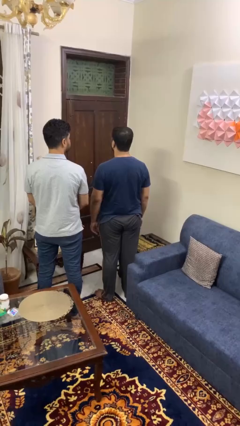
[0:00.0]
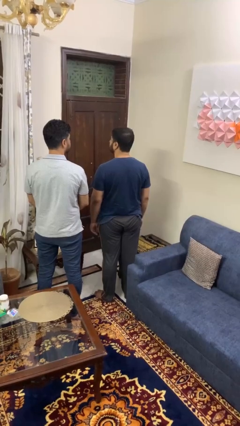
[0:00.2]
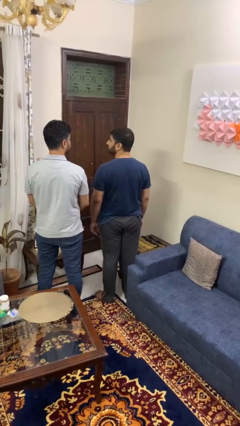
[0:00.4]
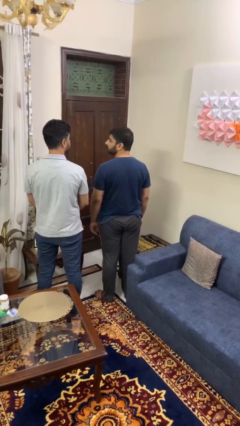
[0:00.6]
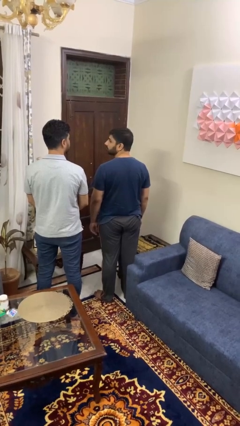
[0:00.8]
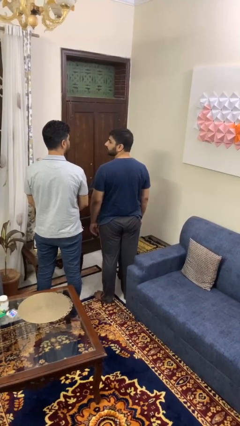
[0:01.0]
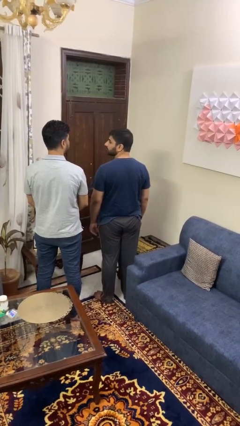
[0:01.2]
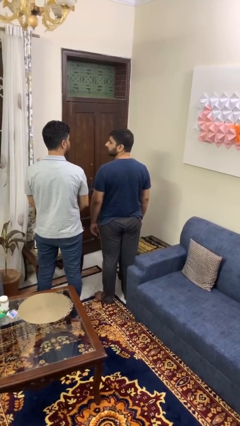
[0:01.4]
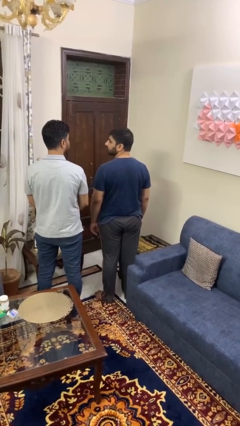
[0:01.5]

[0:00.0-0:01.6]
person looks over shoulder

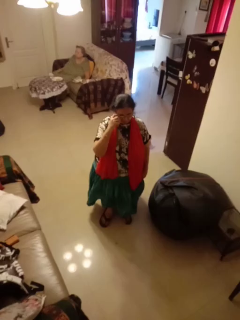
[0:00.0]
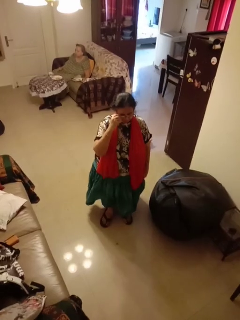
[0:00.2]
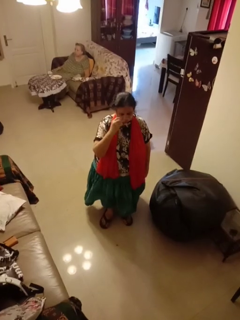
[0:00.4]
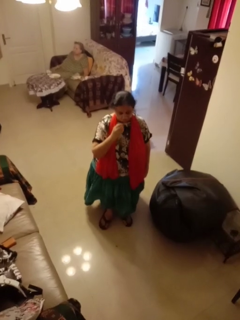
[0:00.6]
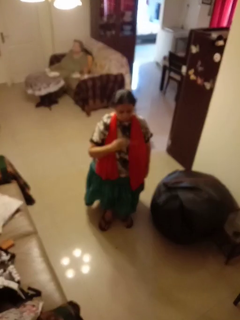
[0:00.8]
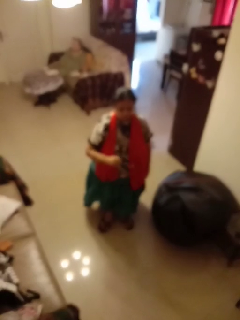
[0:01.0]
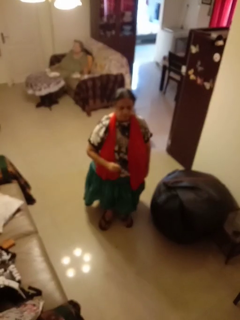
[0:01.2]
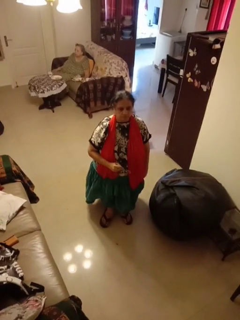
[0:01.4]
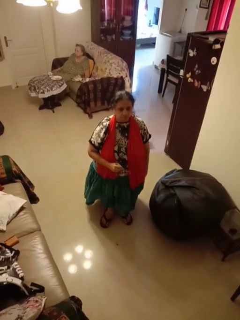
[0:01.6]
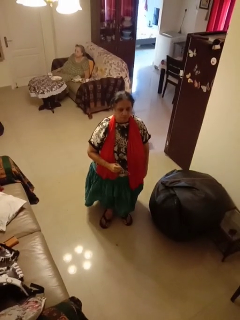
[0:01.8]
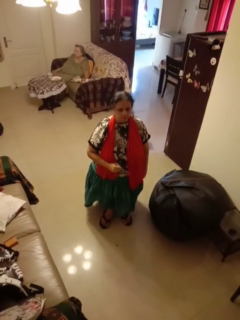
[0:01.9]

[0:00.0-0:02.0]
person takes off glasses

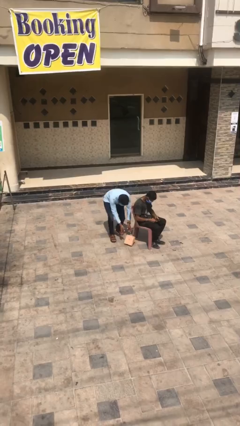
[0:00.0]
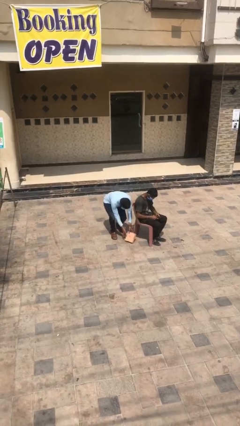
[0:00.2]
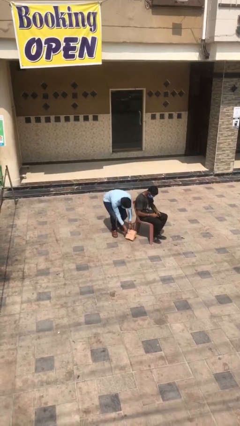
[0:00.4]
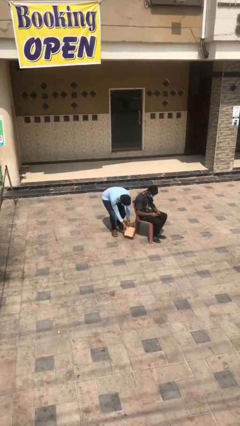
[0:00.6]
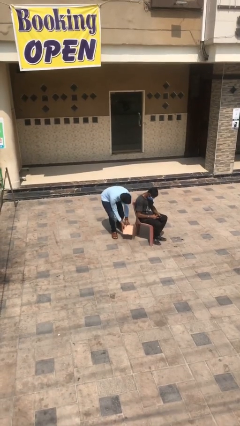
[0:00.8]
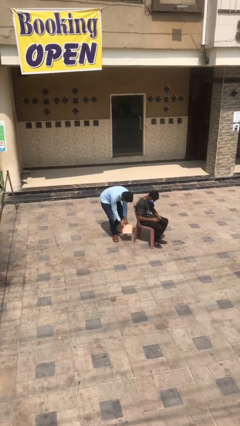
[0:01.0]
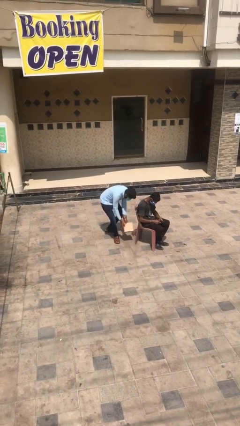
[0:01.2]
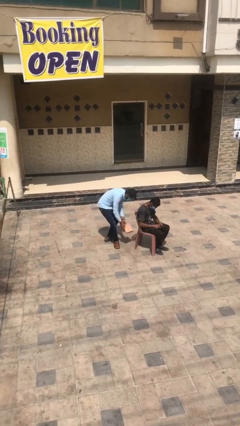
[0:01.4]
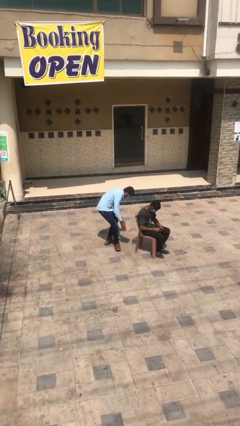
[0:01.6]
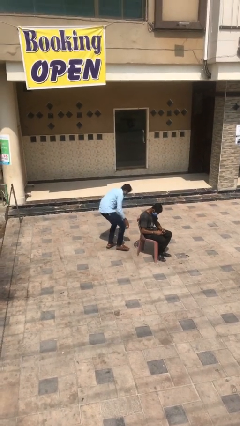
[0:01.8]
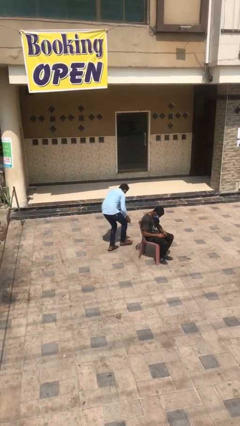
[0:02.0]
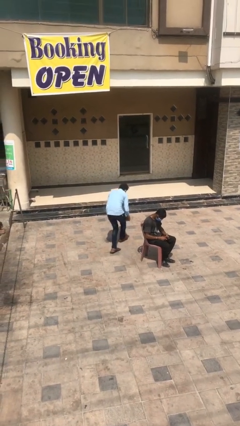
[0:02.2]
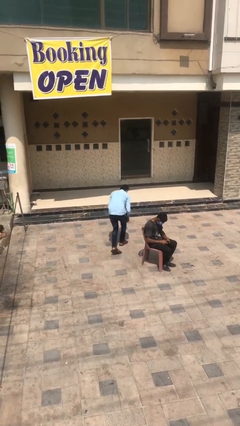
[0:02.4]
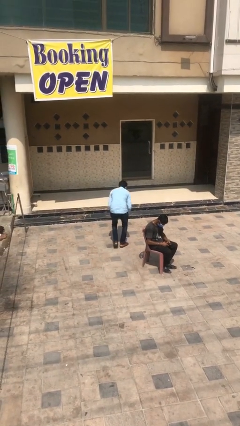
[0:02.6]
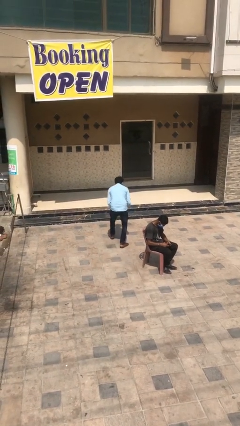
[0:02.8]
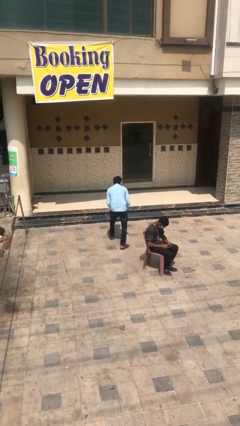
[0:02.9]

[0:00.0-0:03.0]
person steals object from person

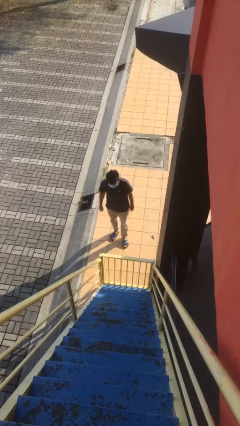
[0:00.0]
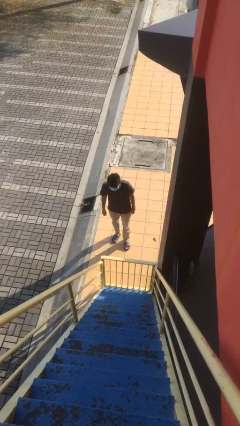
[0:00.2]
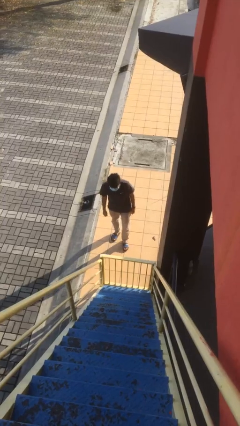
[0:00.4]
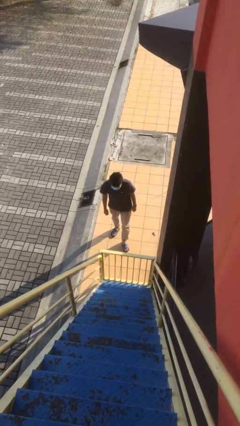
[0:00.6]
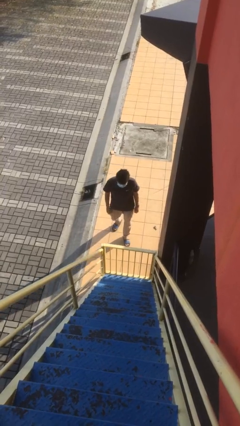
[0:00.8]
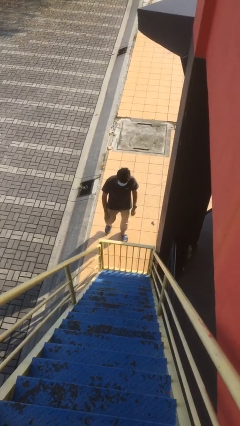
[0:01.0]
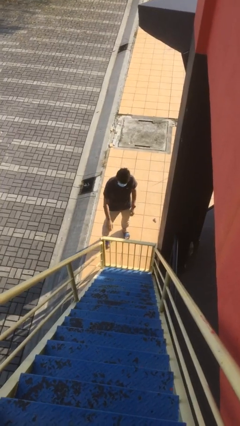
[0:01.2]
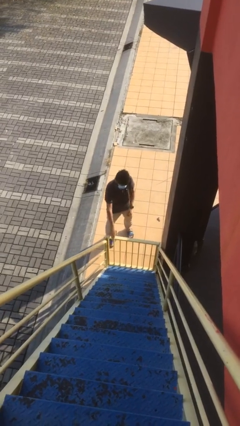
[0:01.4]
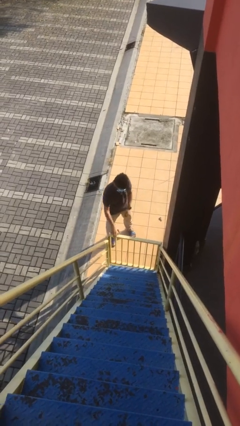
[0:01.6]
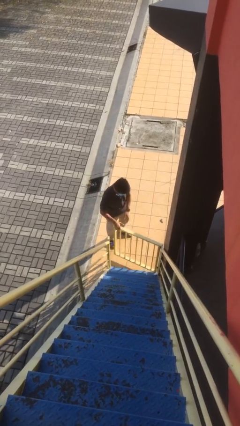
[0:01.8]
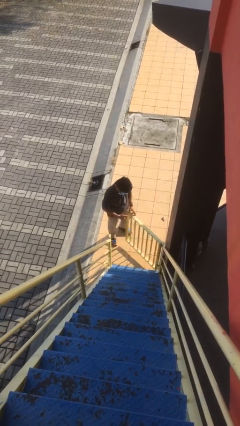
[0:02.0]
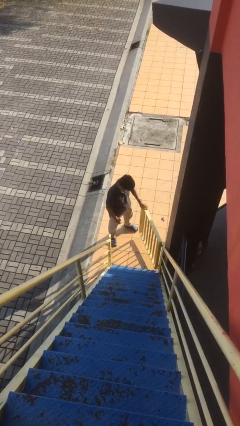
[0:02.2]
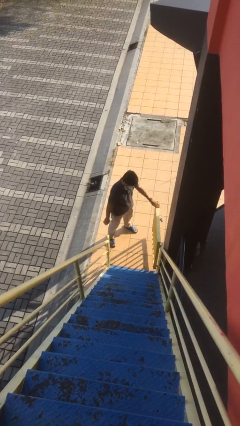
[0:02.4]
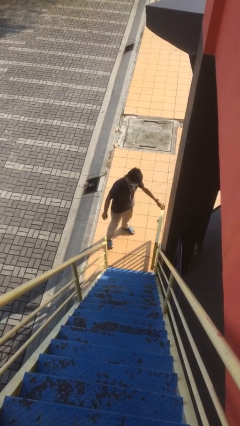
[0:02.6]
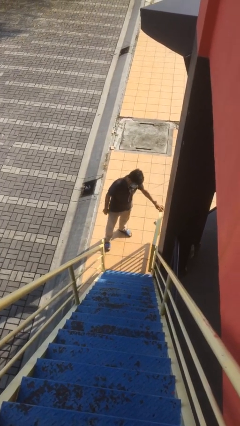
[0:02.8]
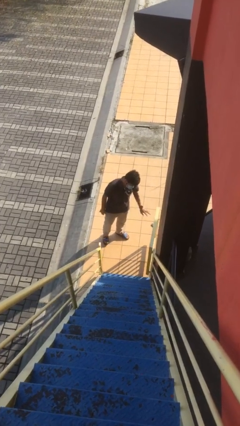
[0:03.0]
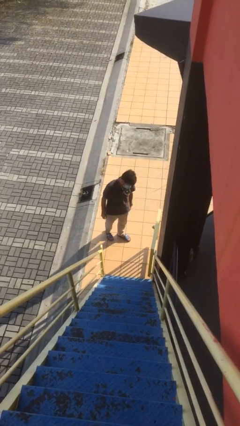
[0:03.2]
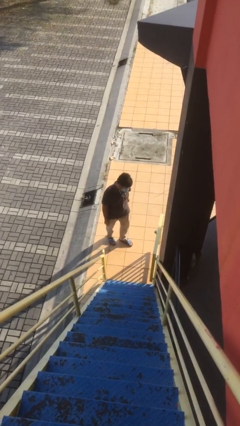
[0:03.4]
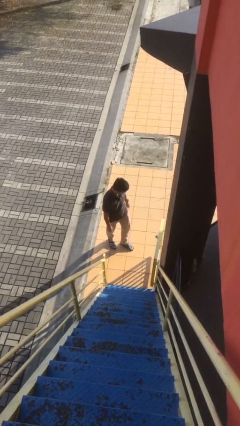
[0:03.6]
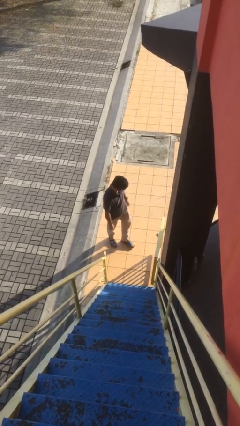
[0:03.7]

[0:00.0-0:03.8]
person opens facility door

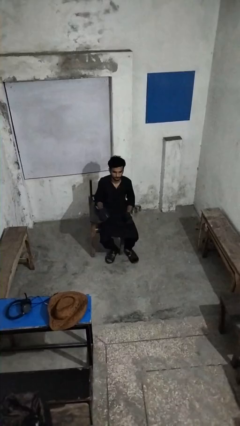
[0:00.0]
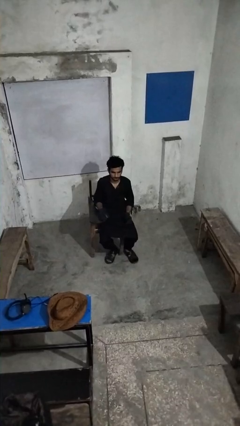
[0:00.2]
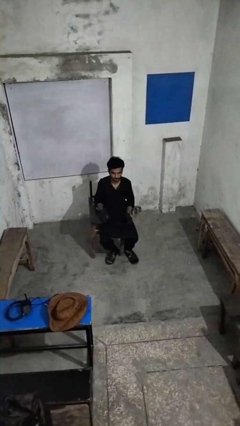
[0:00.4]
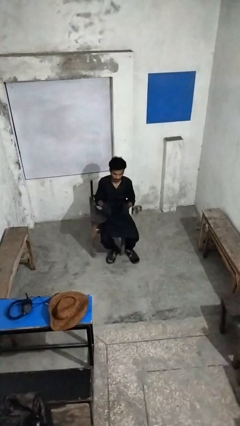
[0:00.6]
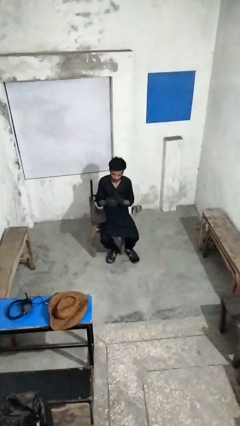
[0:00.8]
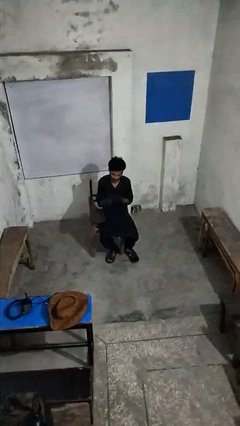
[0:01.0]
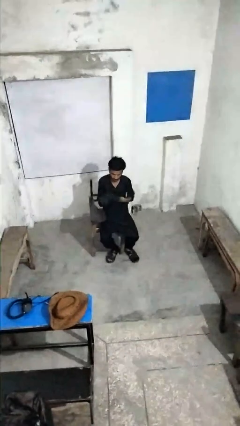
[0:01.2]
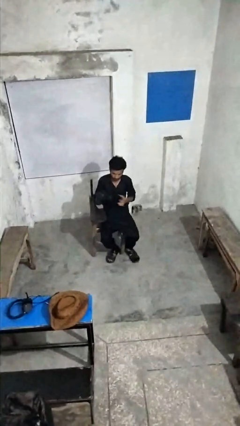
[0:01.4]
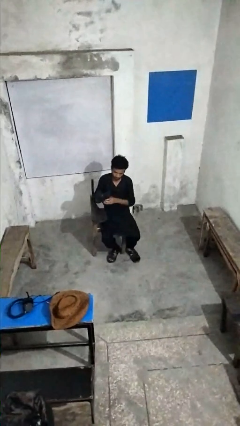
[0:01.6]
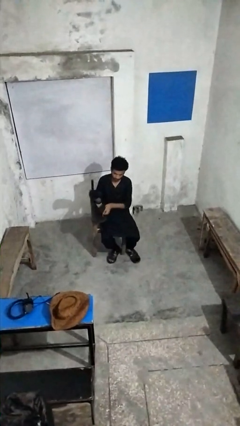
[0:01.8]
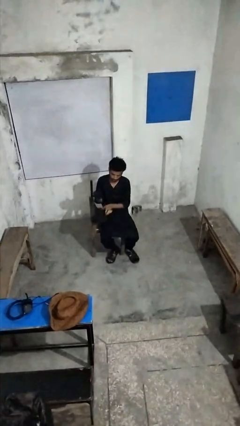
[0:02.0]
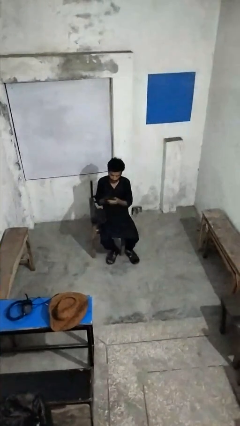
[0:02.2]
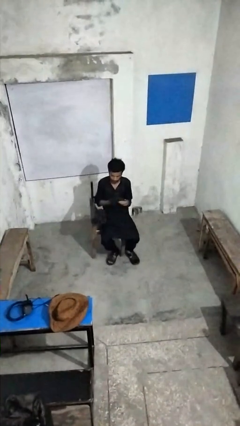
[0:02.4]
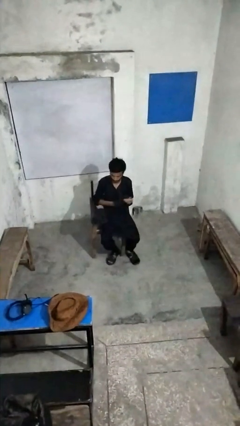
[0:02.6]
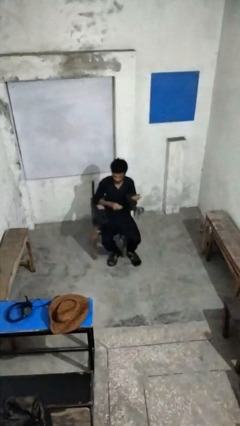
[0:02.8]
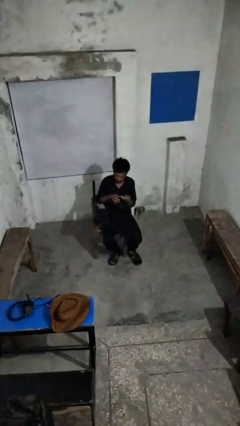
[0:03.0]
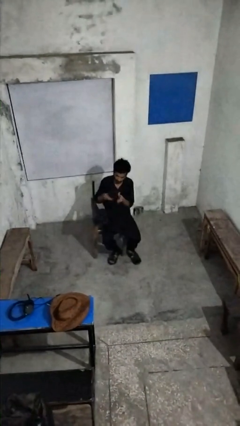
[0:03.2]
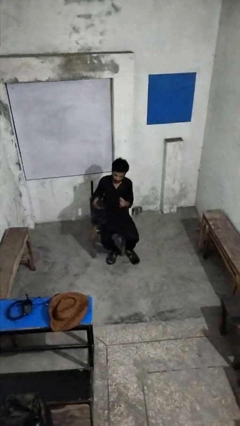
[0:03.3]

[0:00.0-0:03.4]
person takes off gloves

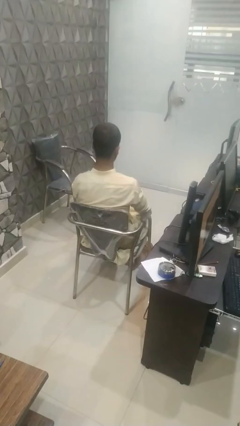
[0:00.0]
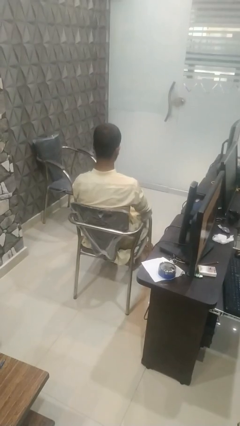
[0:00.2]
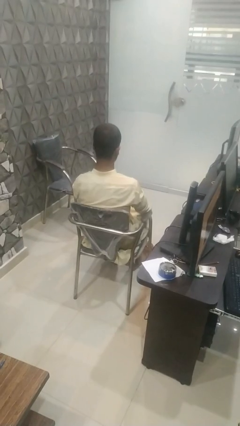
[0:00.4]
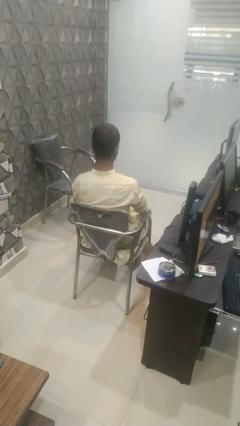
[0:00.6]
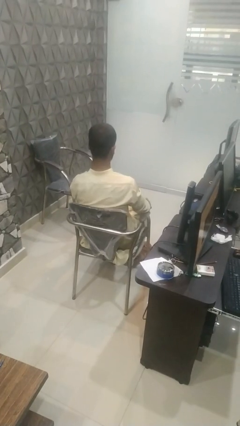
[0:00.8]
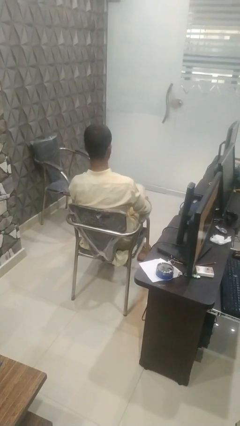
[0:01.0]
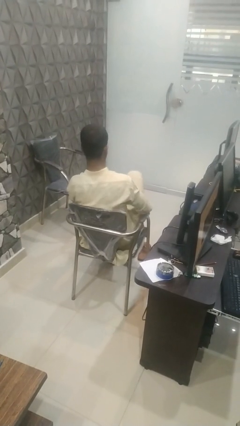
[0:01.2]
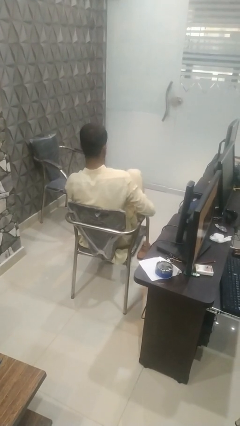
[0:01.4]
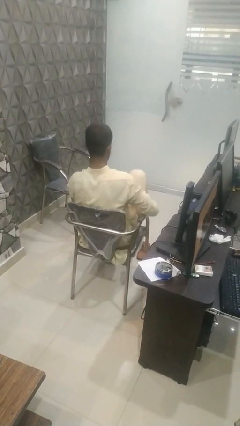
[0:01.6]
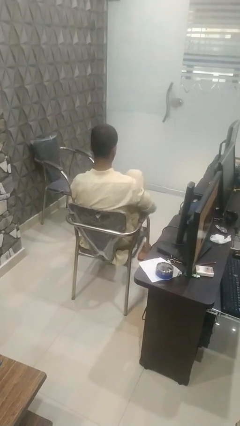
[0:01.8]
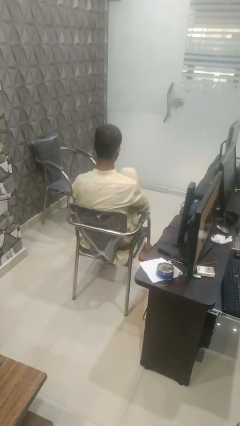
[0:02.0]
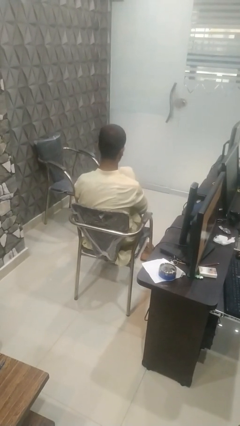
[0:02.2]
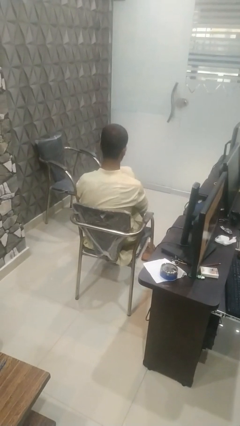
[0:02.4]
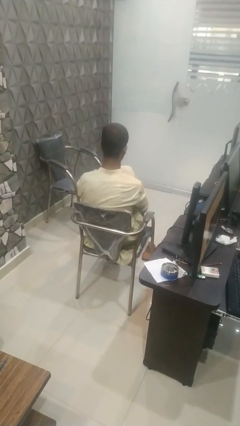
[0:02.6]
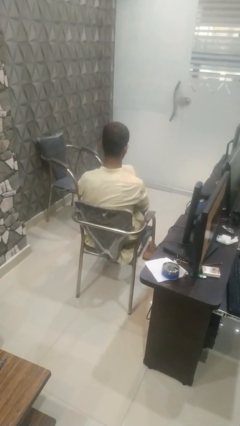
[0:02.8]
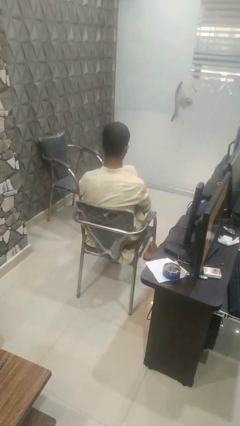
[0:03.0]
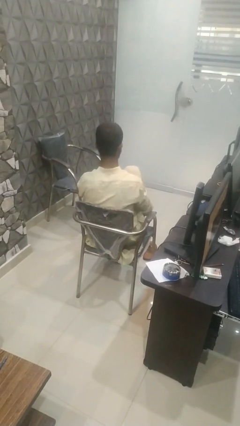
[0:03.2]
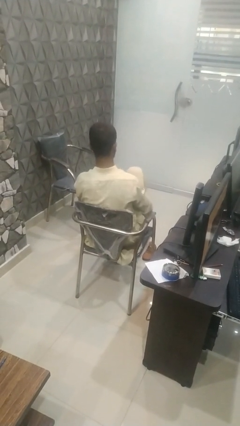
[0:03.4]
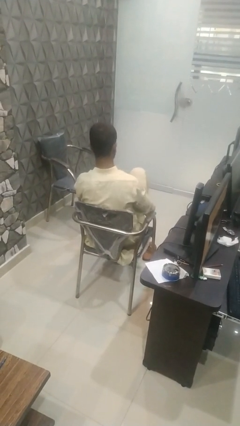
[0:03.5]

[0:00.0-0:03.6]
person rubs foot
